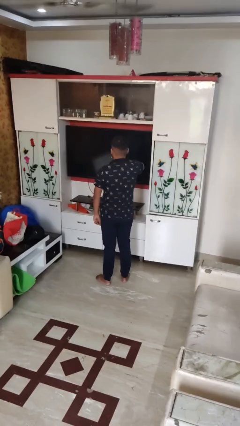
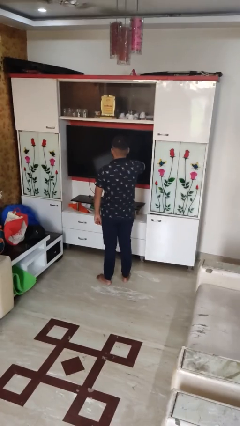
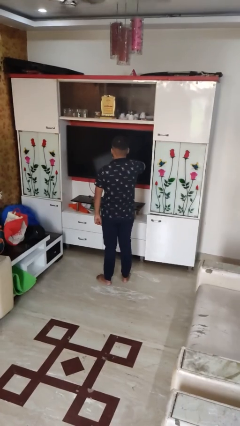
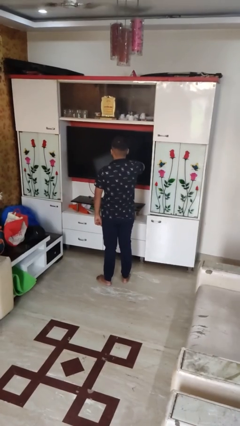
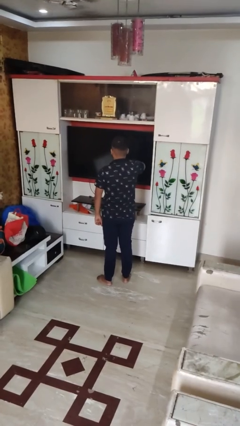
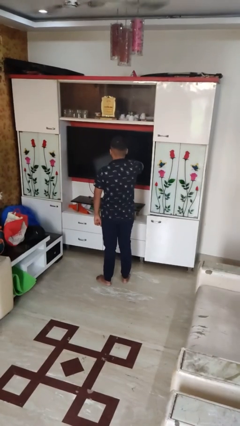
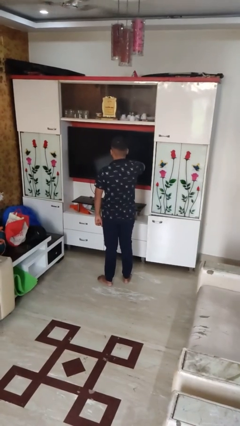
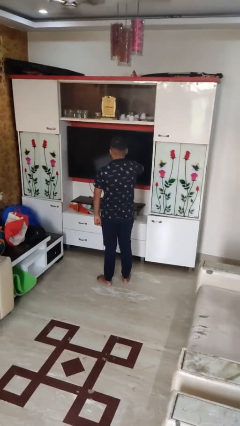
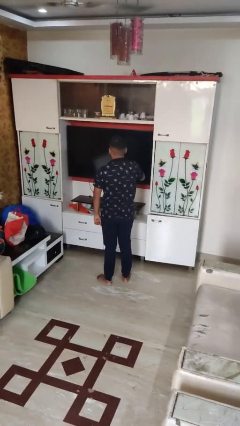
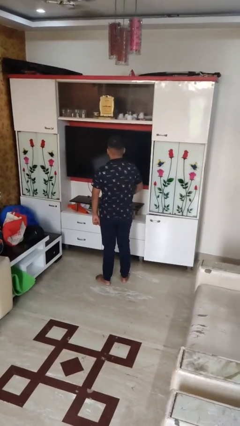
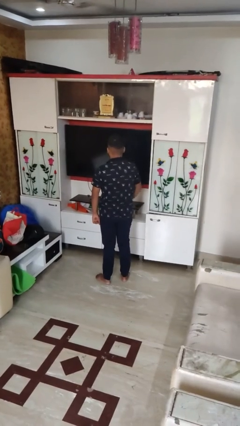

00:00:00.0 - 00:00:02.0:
person strokes chin

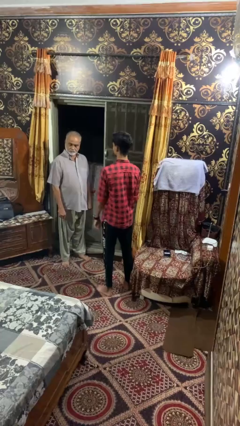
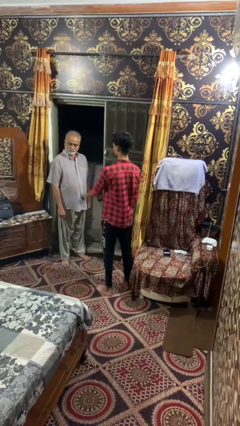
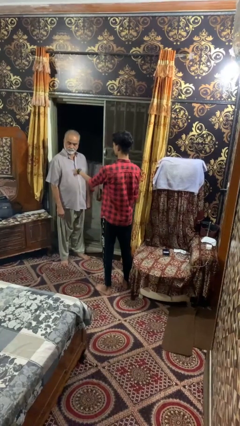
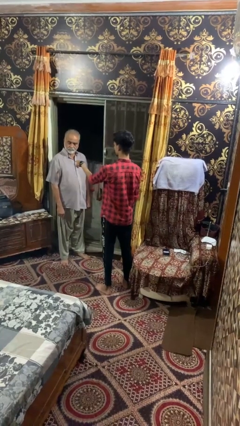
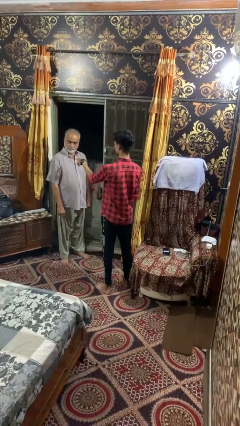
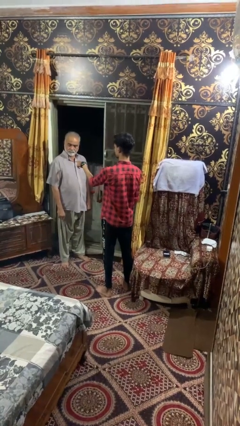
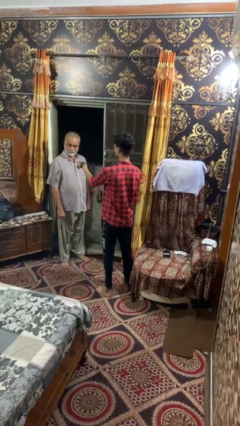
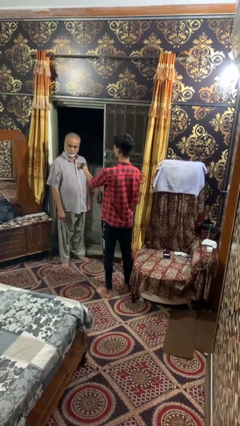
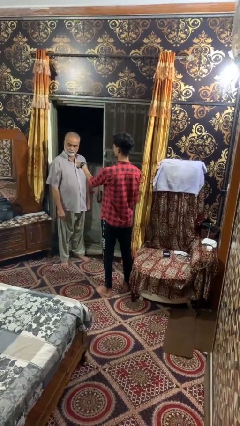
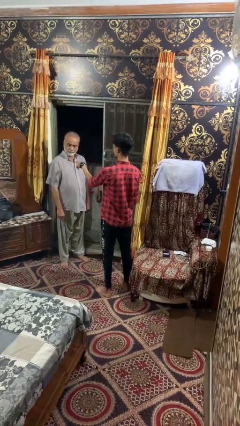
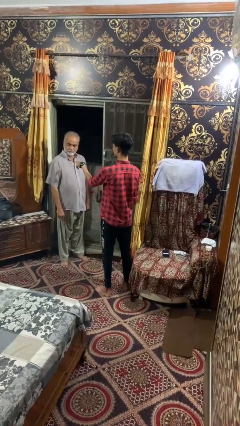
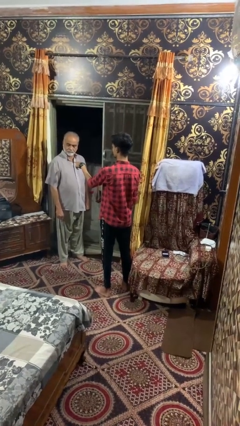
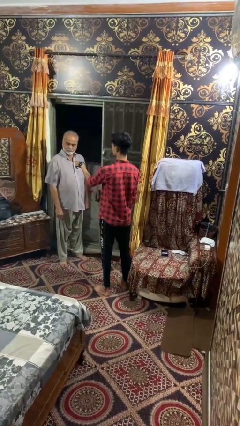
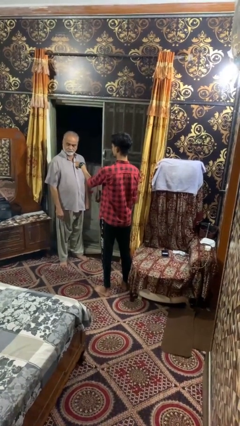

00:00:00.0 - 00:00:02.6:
person points at person

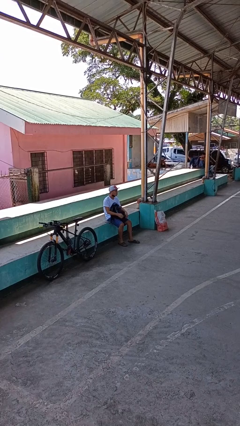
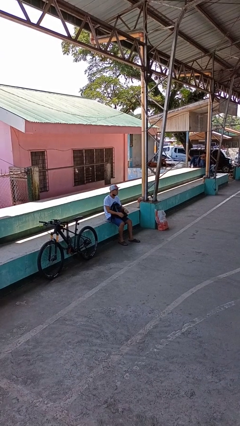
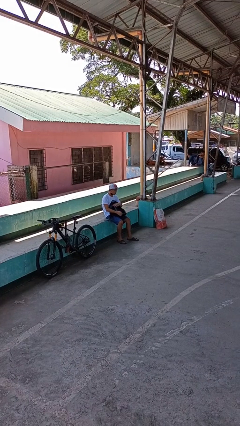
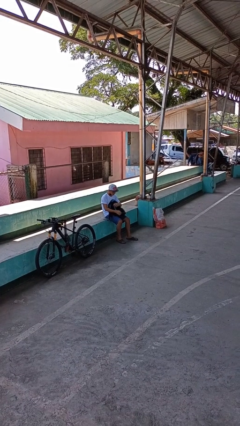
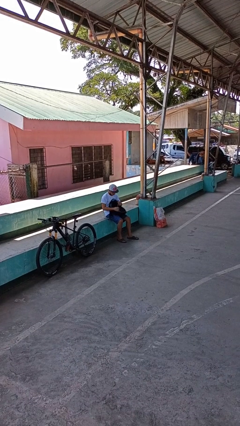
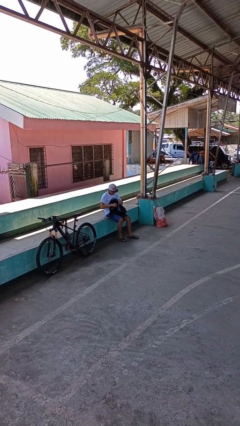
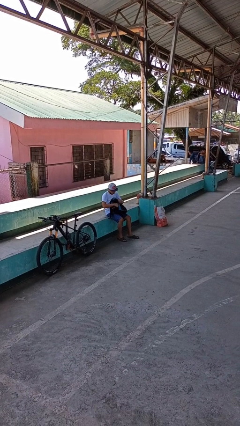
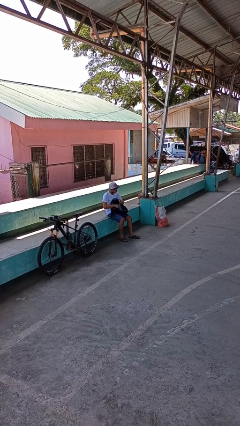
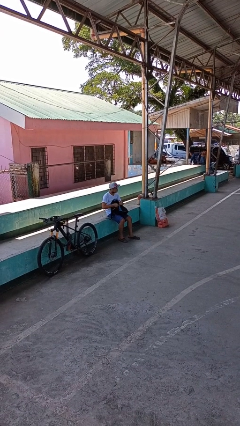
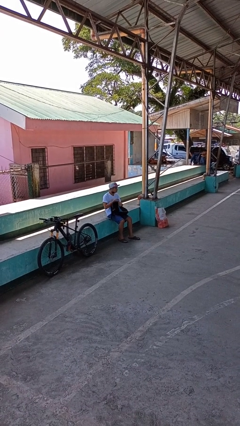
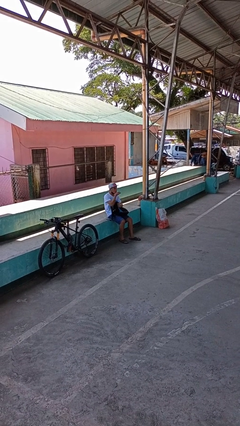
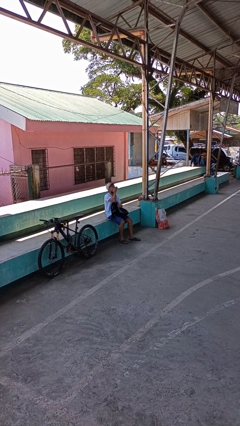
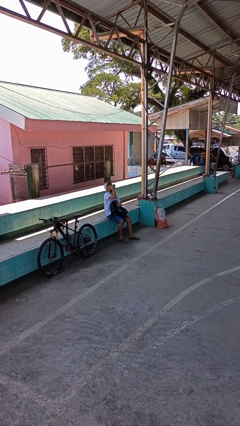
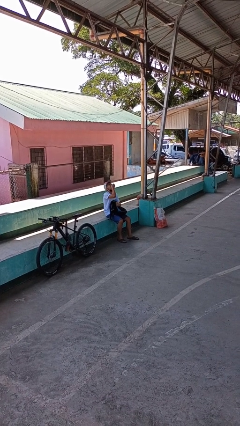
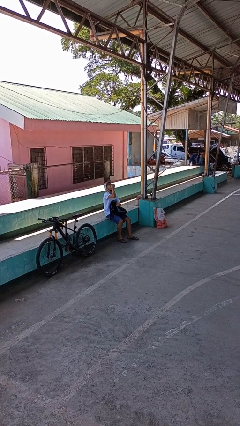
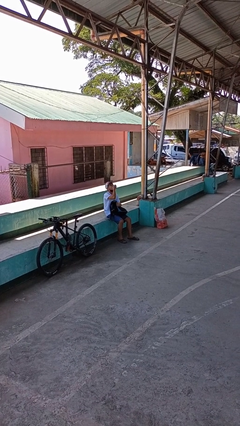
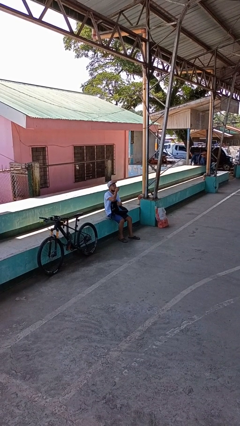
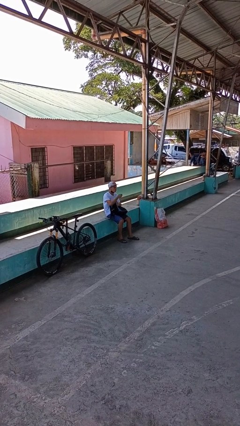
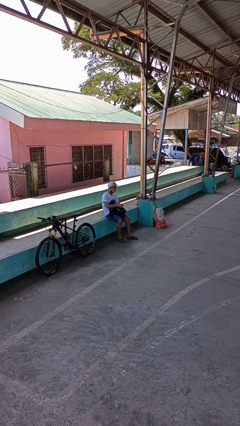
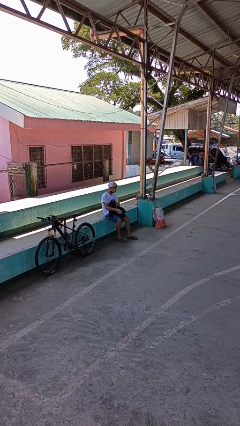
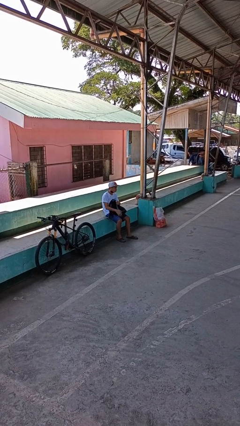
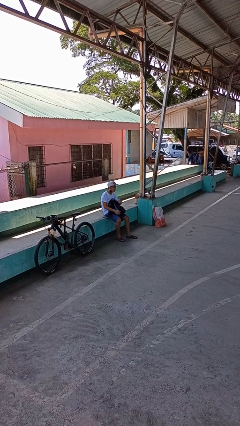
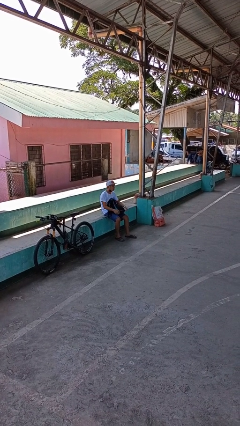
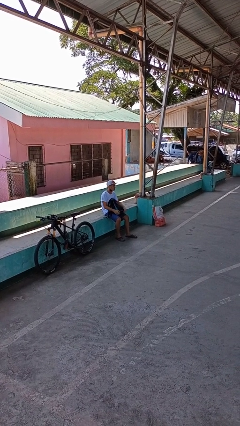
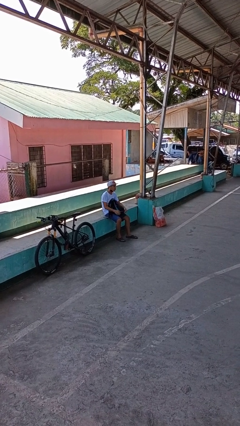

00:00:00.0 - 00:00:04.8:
person eats snack from bag

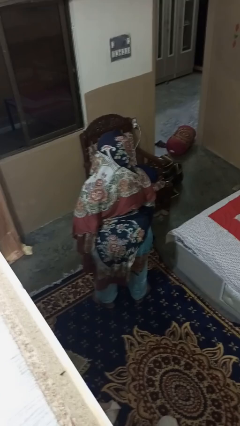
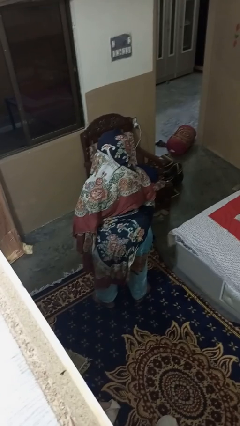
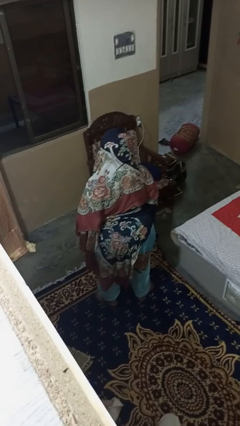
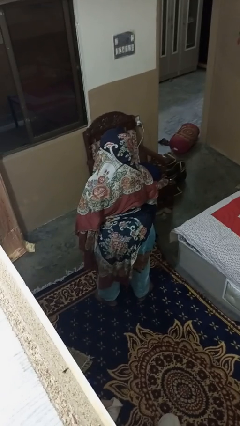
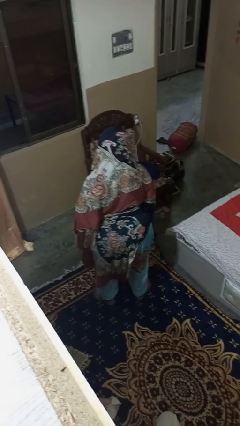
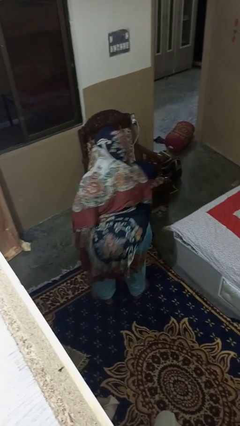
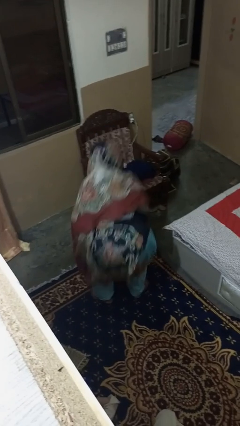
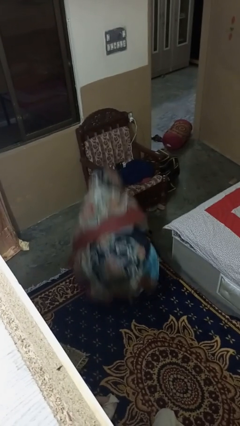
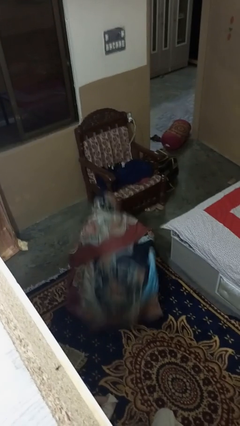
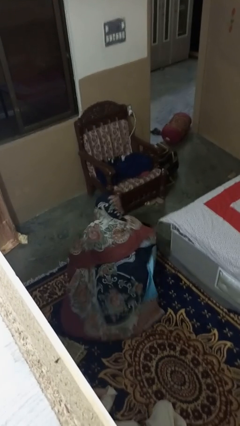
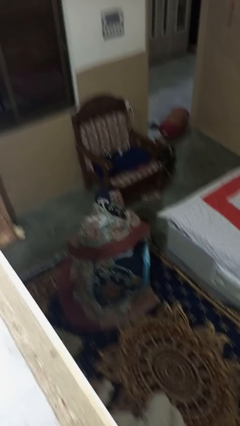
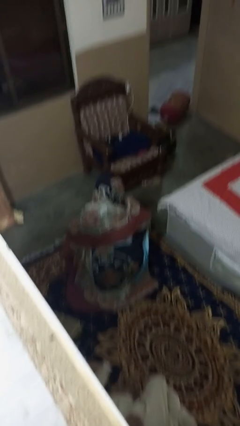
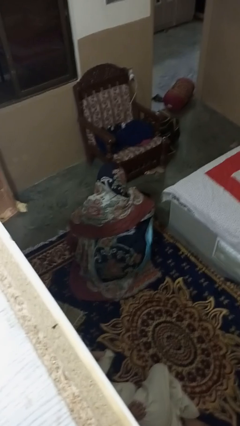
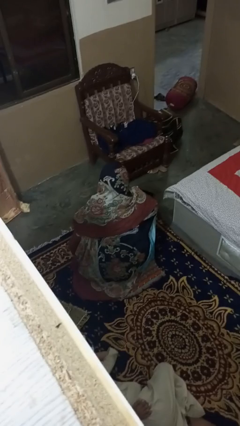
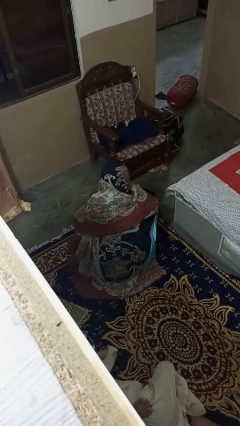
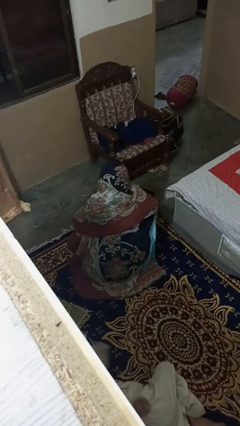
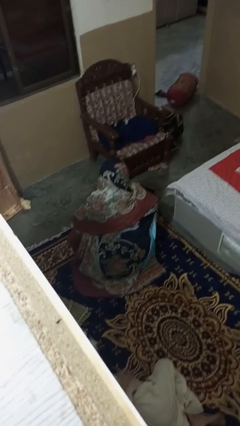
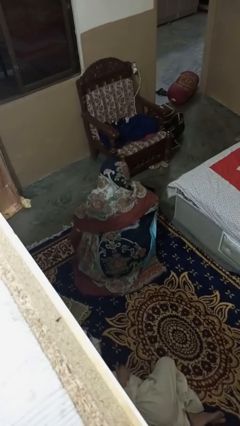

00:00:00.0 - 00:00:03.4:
person squats

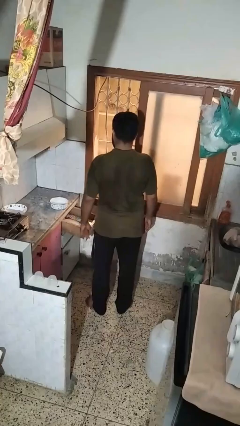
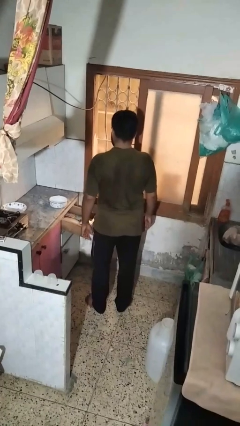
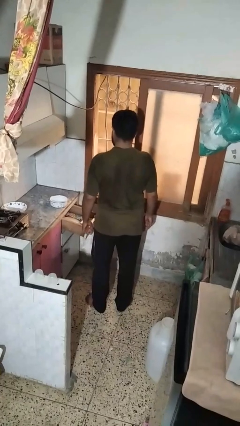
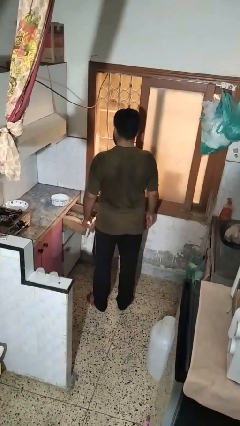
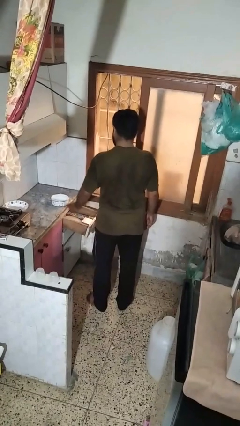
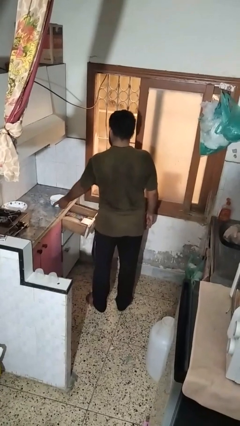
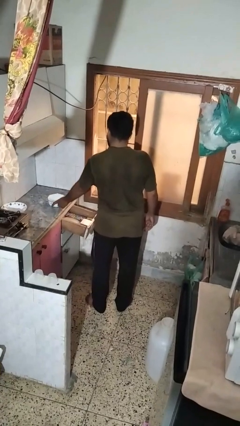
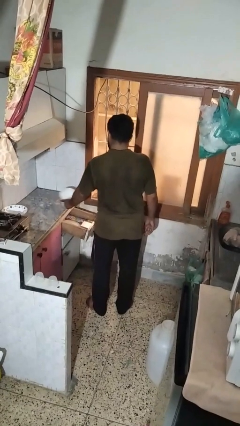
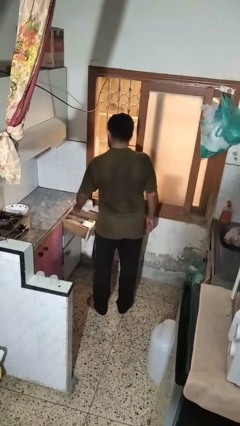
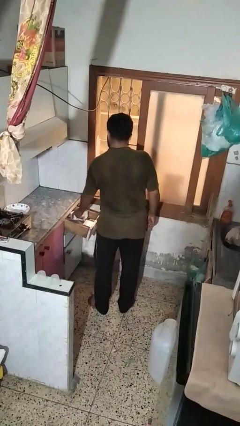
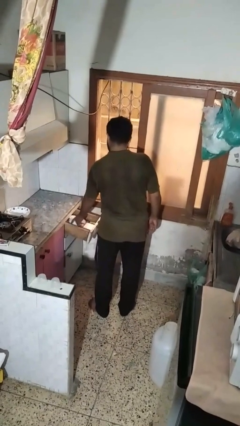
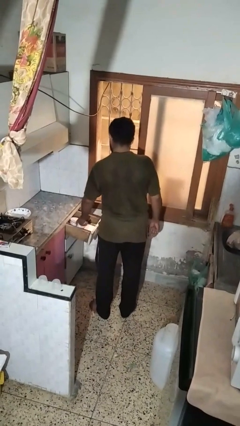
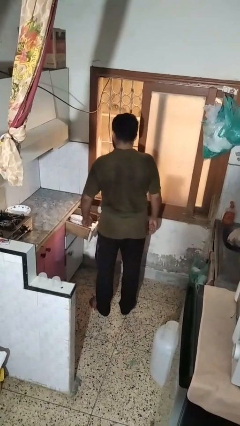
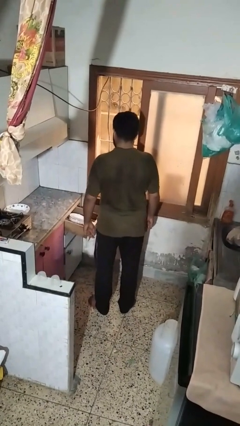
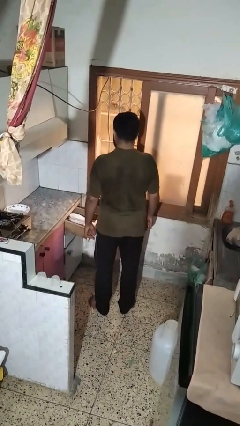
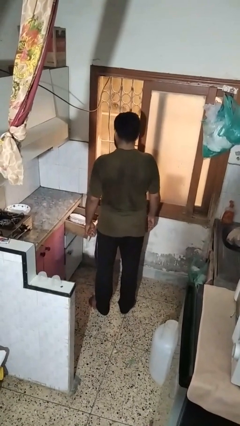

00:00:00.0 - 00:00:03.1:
person puts object into kitchen drawer

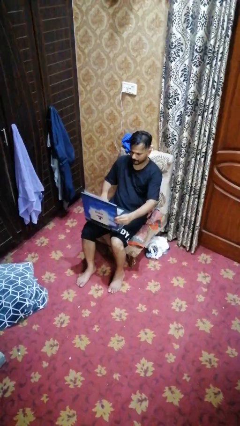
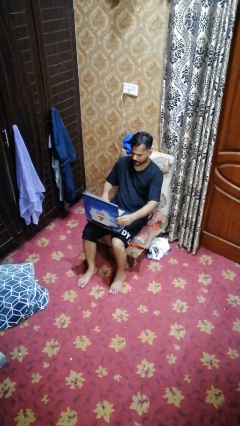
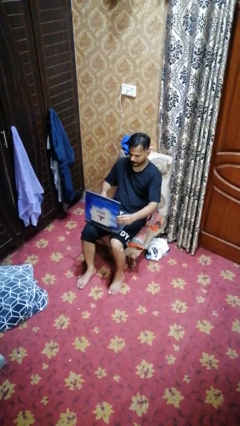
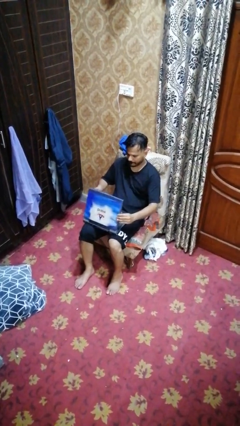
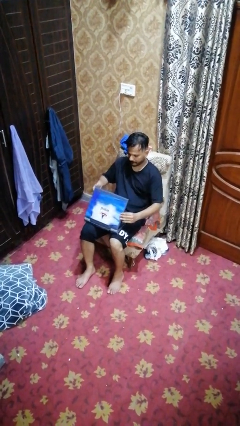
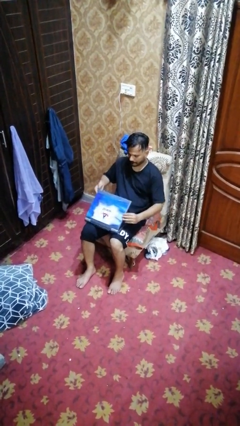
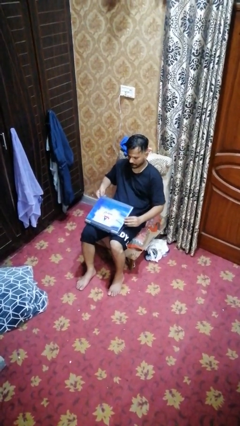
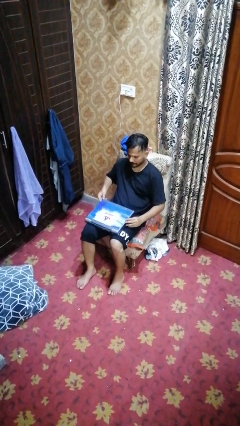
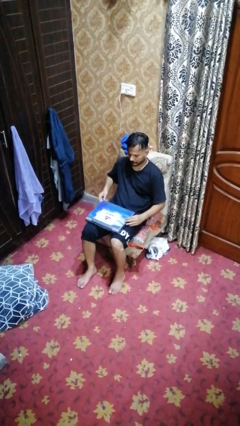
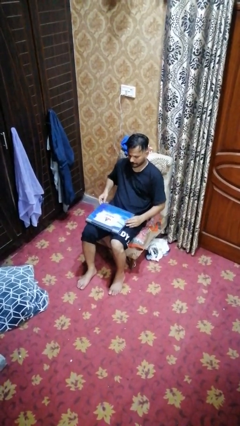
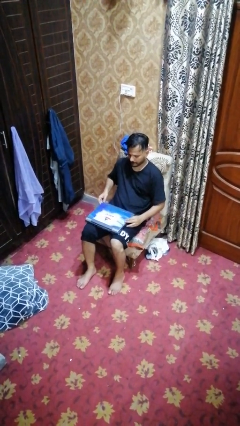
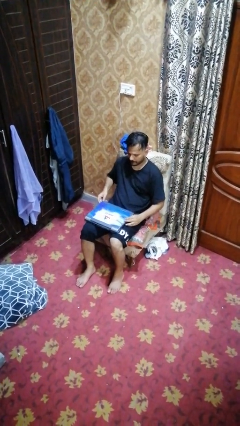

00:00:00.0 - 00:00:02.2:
person closes laptop
